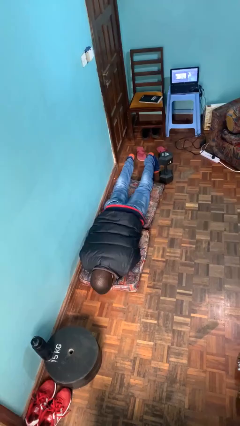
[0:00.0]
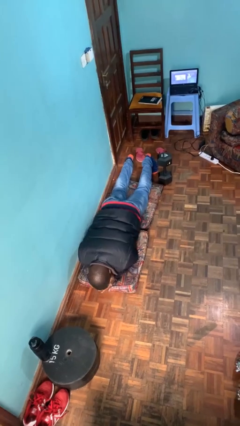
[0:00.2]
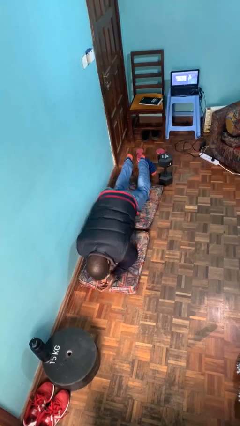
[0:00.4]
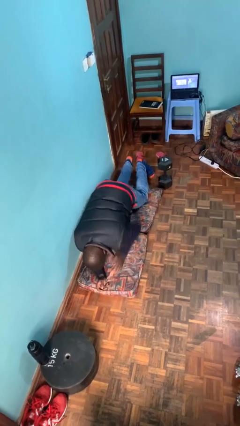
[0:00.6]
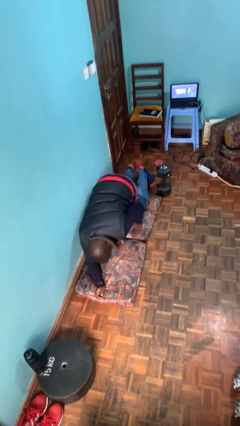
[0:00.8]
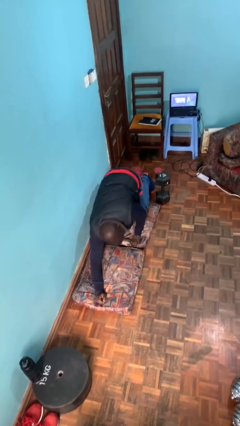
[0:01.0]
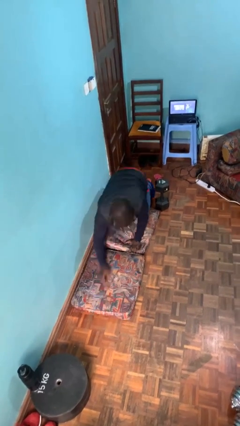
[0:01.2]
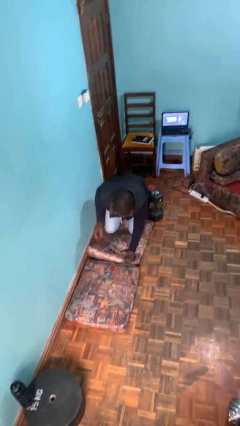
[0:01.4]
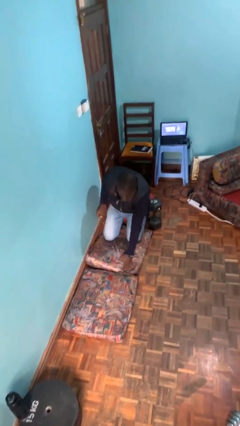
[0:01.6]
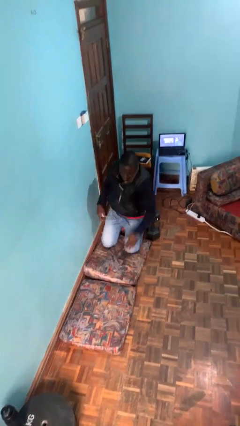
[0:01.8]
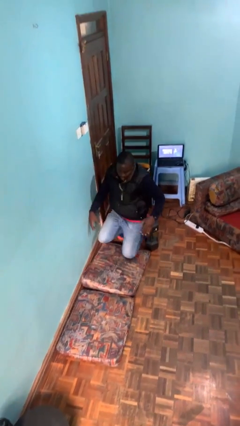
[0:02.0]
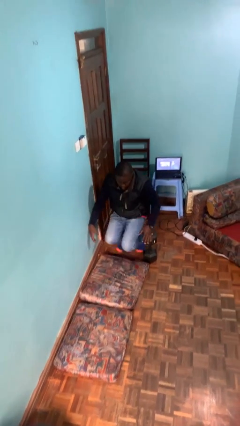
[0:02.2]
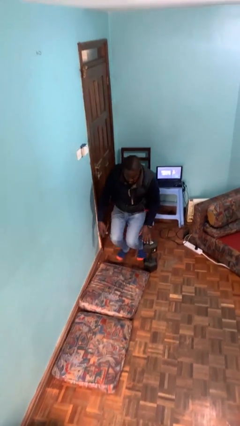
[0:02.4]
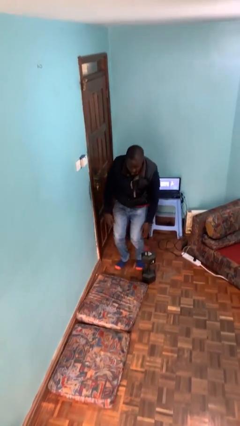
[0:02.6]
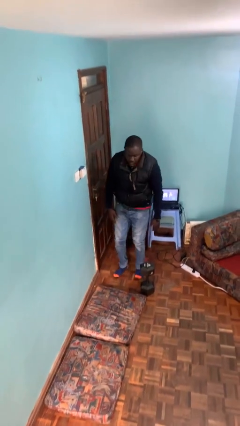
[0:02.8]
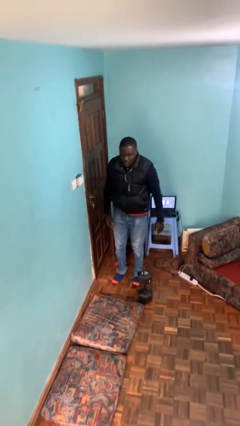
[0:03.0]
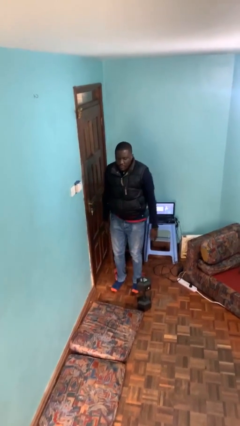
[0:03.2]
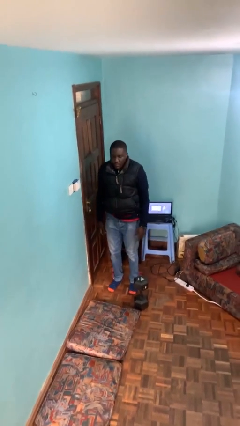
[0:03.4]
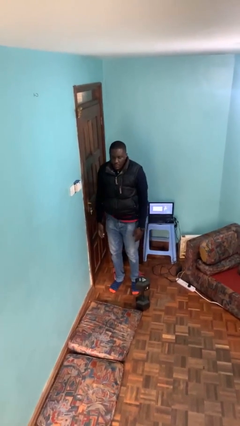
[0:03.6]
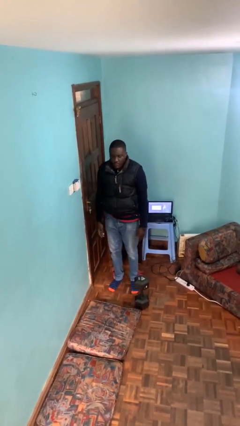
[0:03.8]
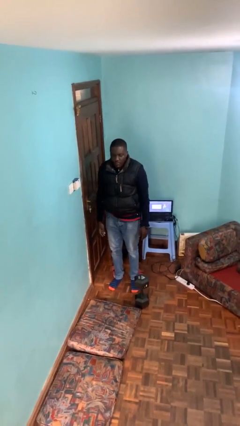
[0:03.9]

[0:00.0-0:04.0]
person stands up from floor

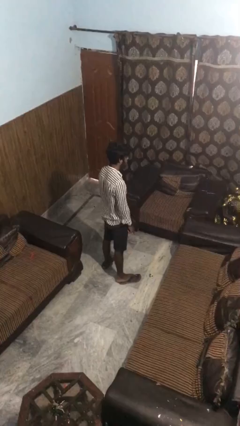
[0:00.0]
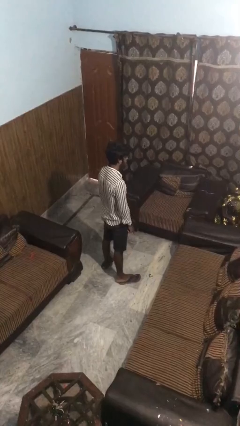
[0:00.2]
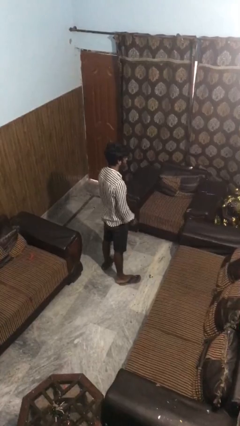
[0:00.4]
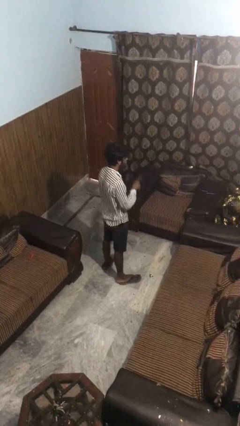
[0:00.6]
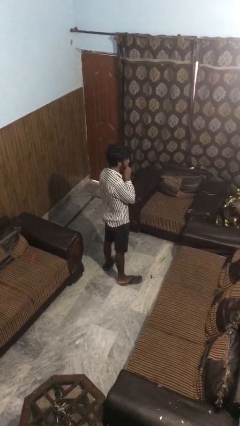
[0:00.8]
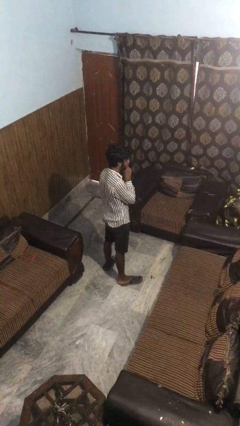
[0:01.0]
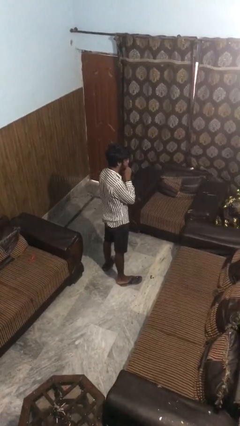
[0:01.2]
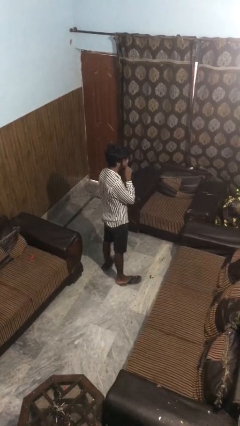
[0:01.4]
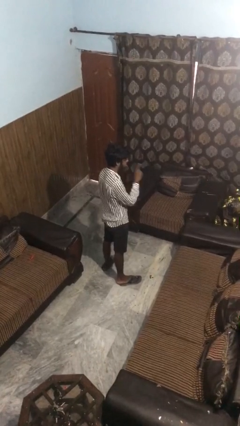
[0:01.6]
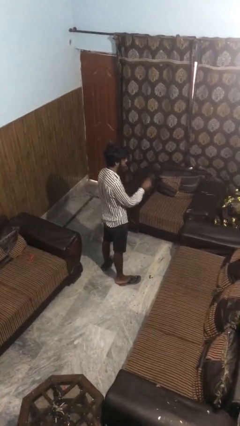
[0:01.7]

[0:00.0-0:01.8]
person gestures be quiet

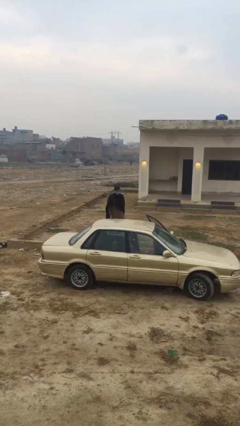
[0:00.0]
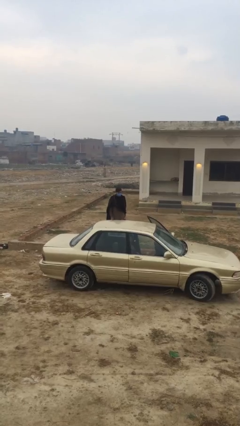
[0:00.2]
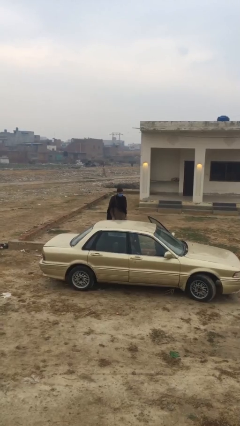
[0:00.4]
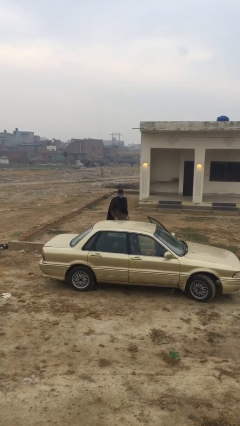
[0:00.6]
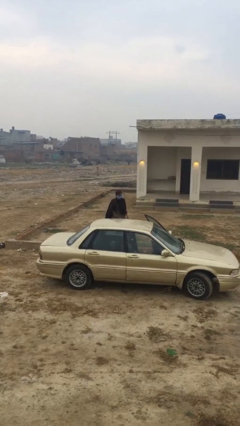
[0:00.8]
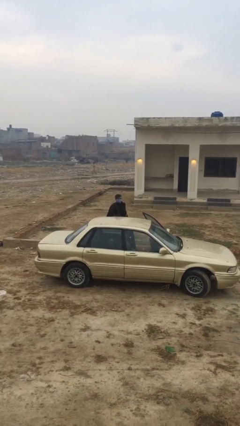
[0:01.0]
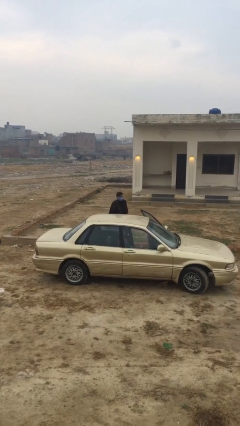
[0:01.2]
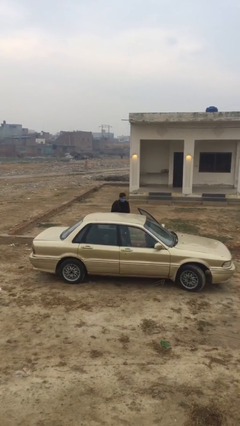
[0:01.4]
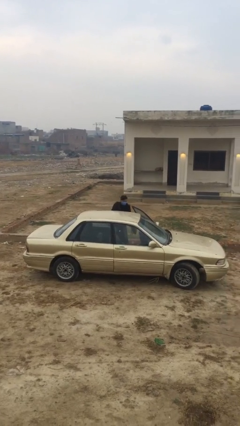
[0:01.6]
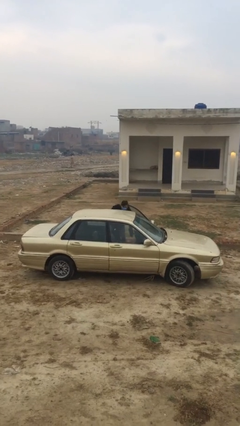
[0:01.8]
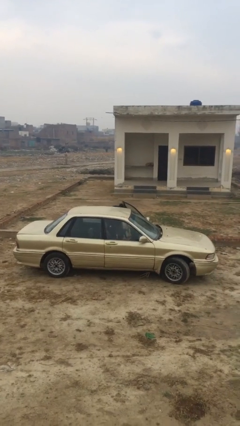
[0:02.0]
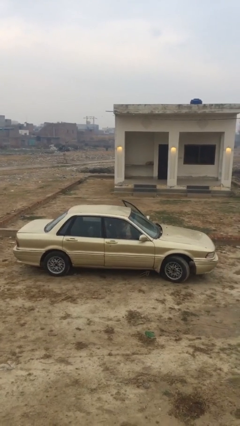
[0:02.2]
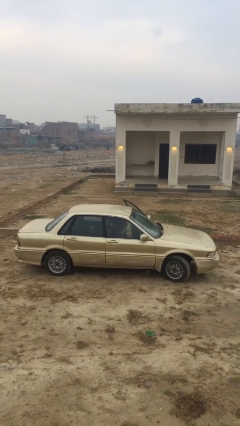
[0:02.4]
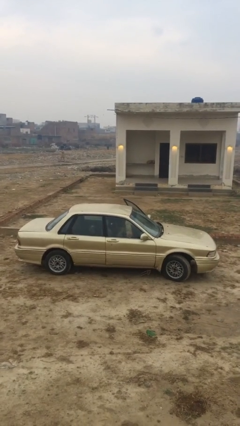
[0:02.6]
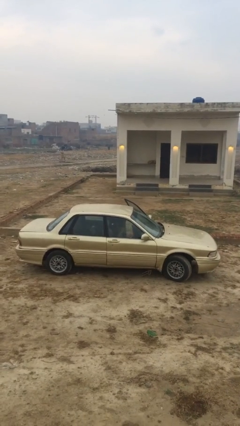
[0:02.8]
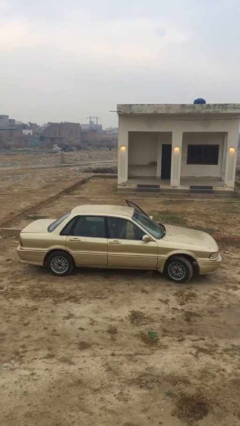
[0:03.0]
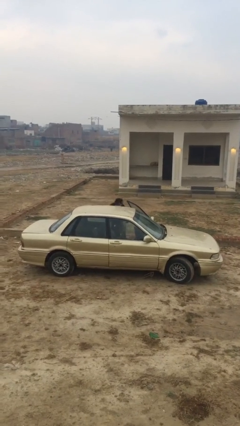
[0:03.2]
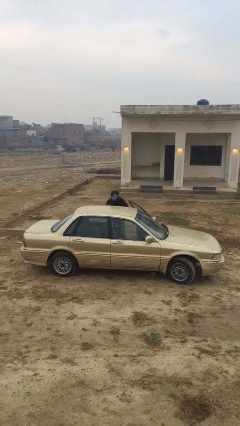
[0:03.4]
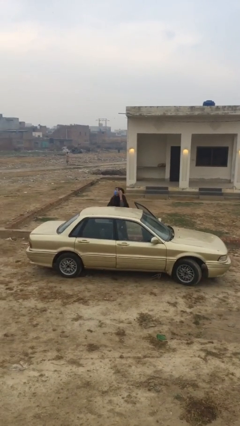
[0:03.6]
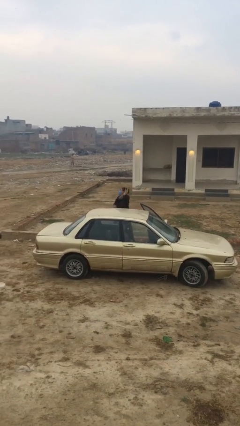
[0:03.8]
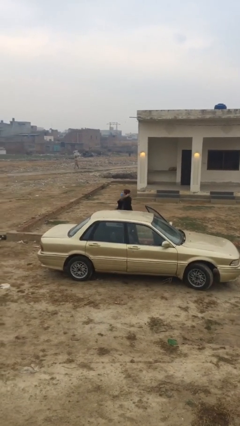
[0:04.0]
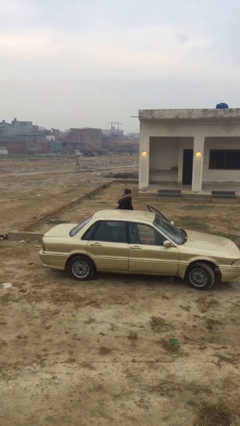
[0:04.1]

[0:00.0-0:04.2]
person loads car

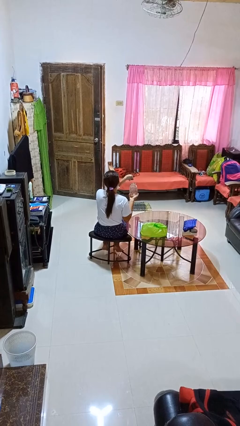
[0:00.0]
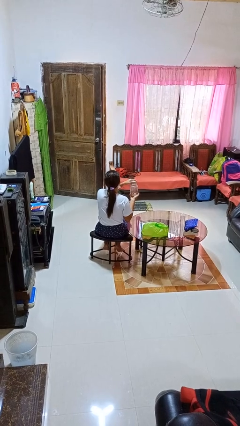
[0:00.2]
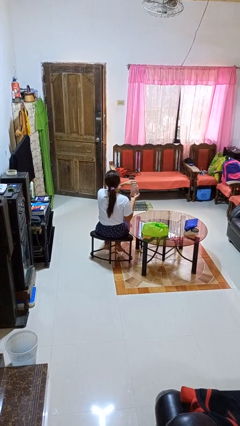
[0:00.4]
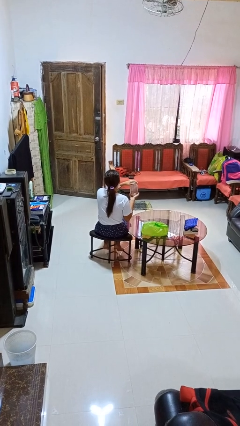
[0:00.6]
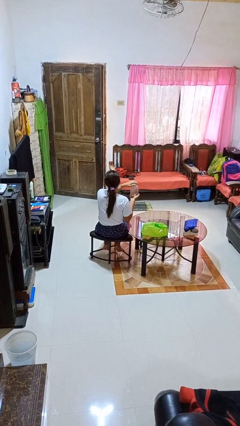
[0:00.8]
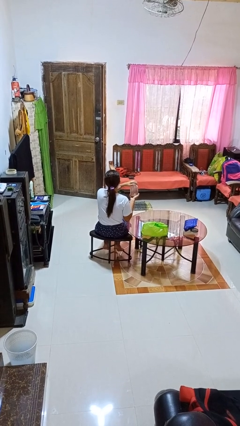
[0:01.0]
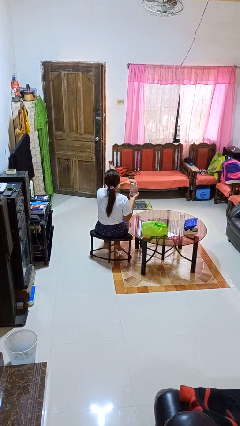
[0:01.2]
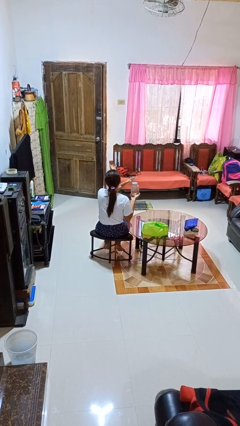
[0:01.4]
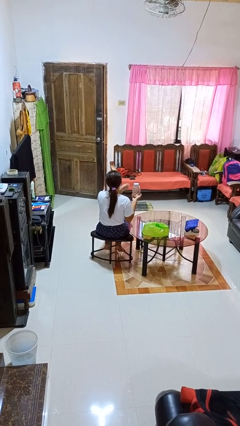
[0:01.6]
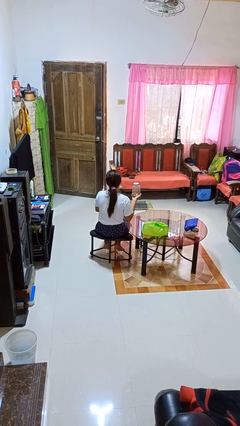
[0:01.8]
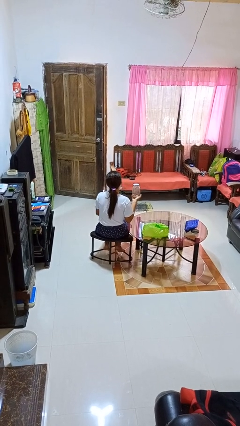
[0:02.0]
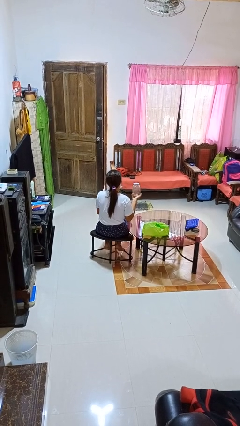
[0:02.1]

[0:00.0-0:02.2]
person closes jar

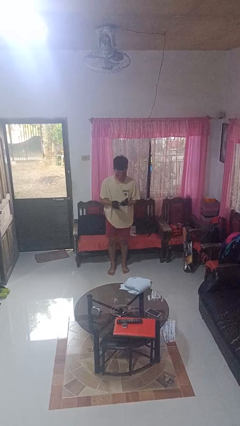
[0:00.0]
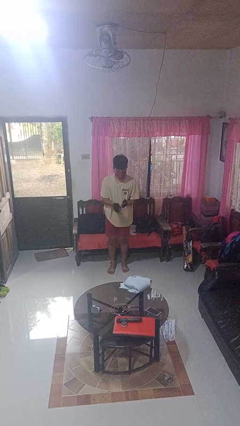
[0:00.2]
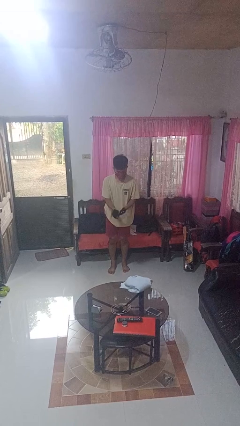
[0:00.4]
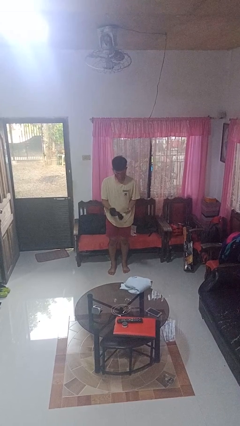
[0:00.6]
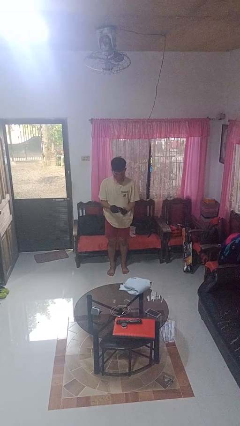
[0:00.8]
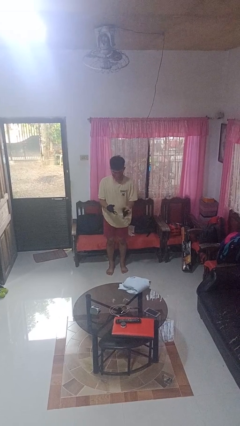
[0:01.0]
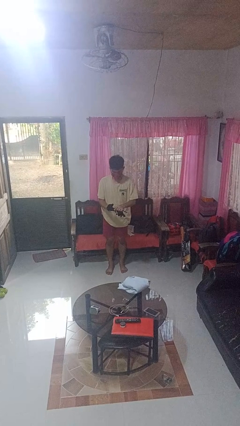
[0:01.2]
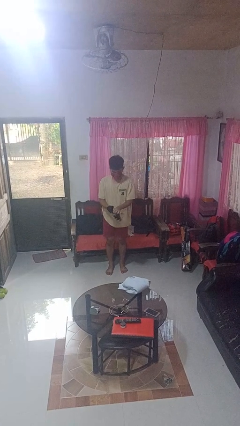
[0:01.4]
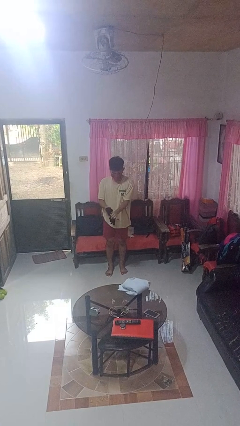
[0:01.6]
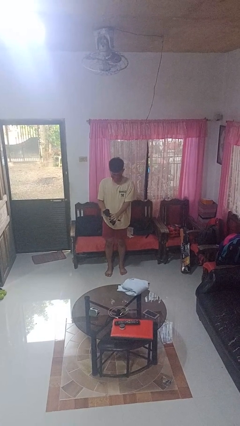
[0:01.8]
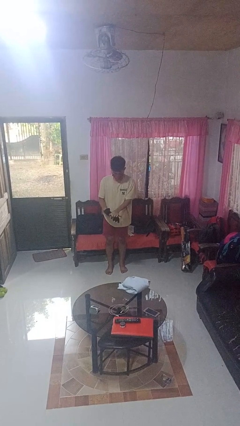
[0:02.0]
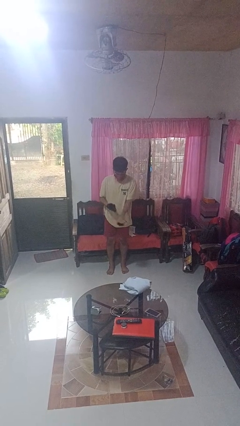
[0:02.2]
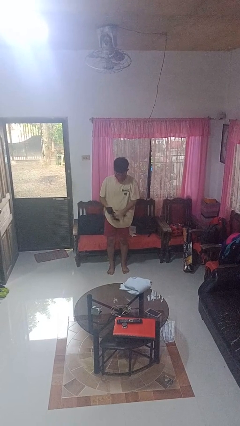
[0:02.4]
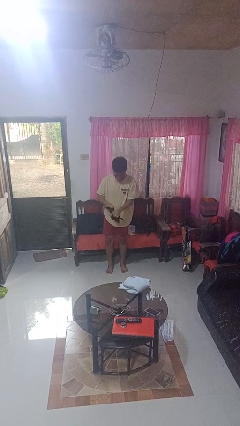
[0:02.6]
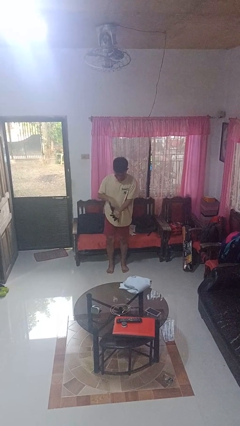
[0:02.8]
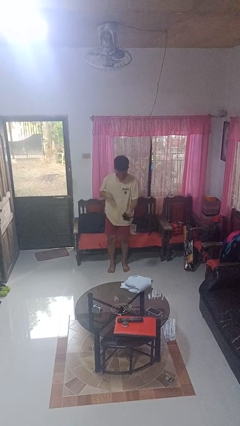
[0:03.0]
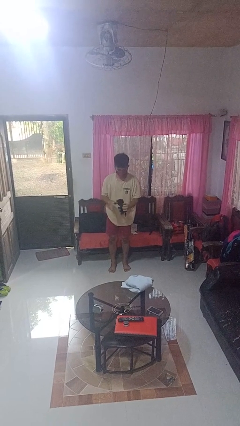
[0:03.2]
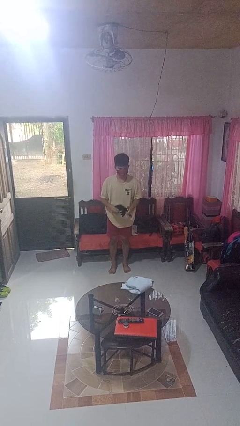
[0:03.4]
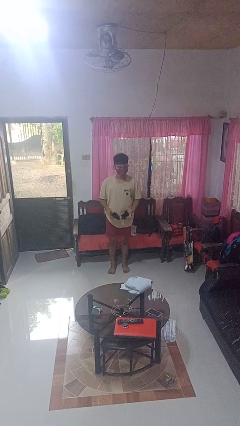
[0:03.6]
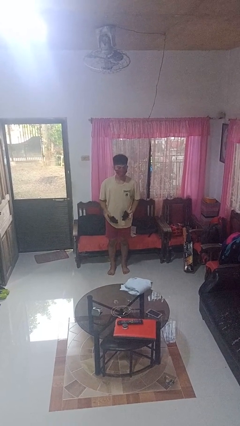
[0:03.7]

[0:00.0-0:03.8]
person takes off gloves

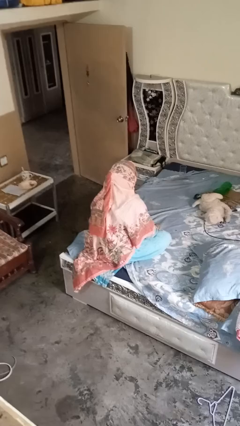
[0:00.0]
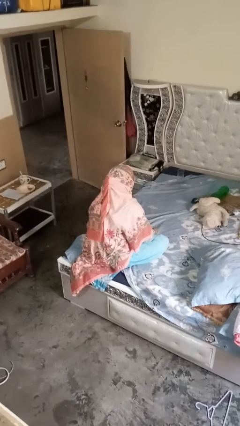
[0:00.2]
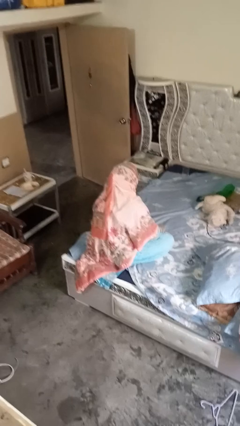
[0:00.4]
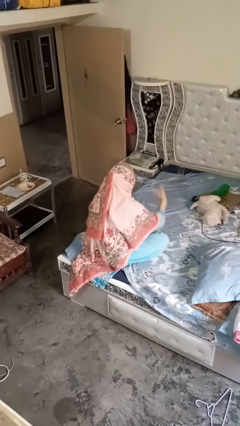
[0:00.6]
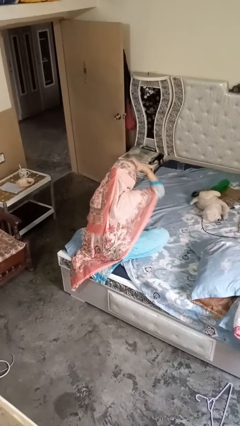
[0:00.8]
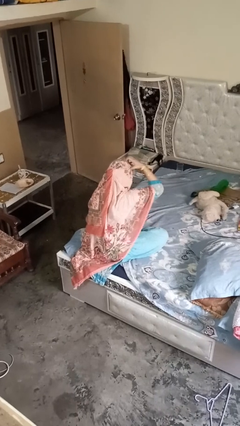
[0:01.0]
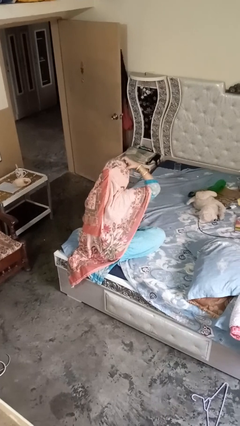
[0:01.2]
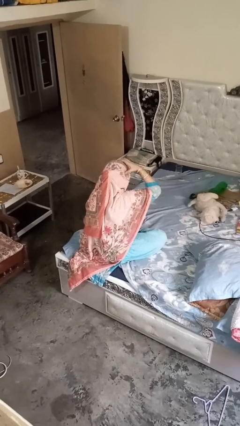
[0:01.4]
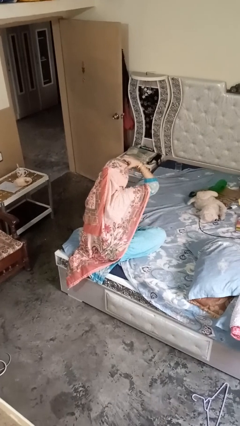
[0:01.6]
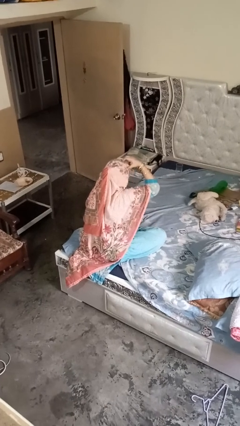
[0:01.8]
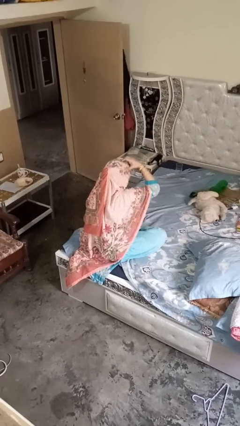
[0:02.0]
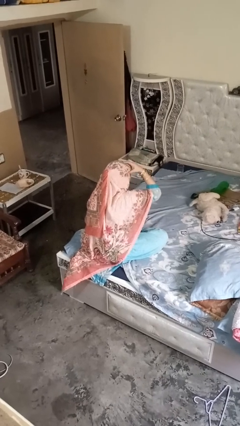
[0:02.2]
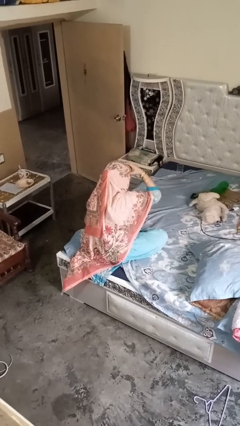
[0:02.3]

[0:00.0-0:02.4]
person strokes hair
